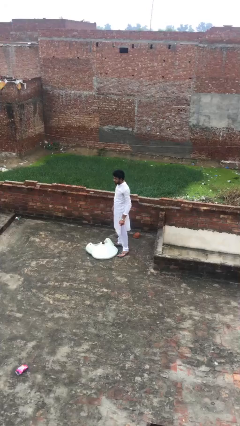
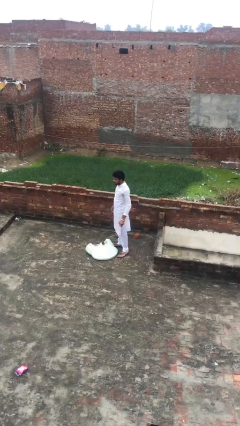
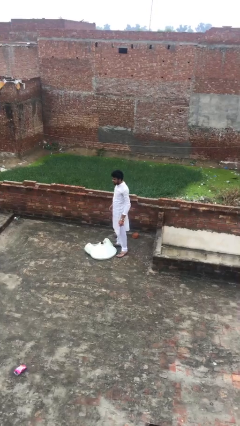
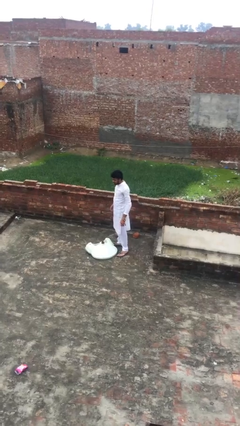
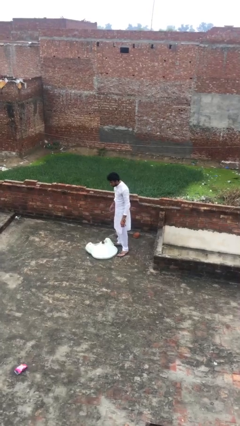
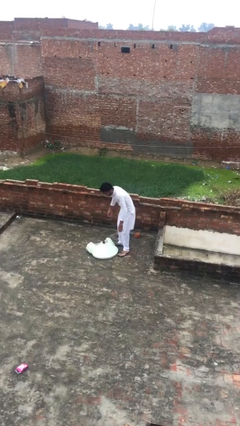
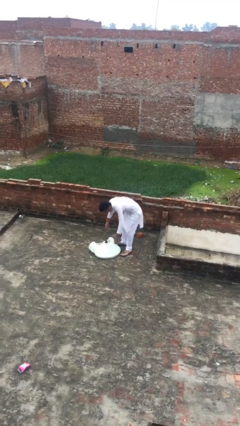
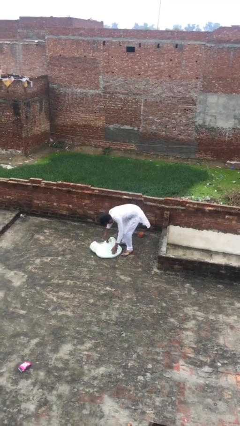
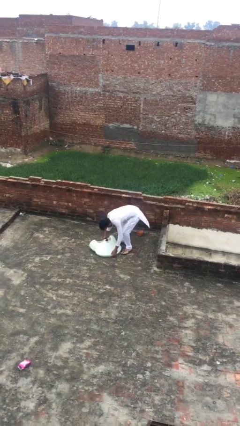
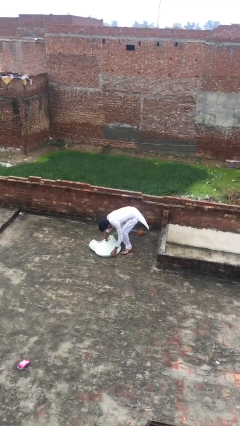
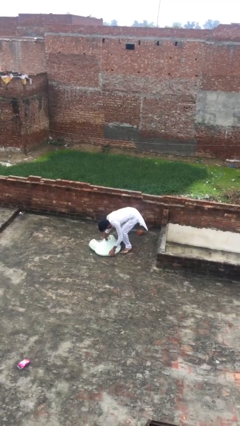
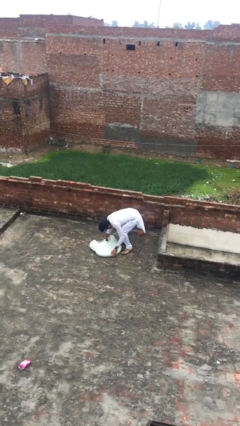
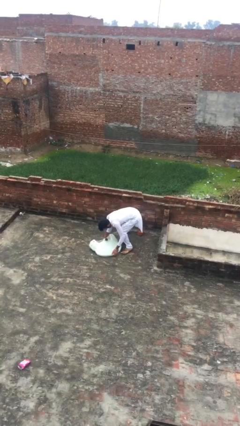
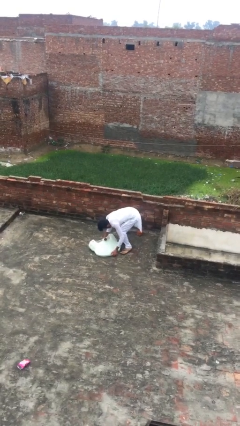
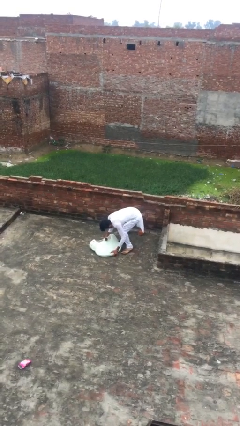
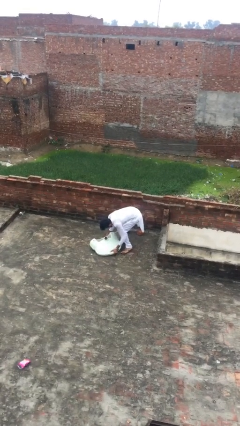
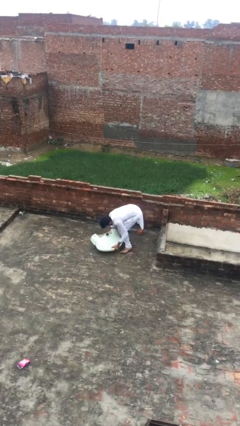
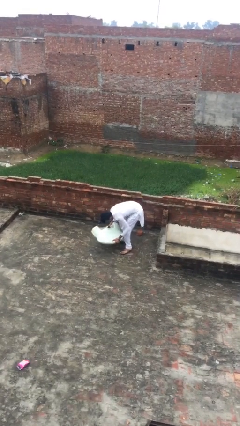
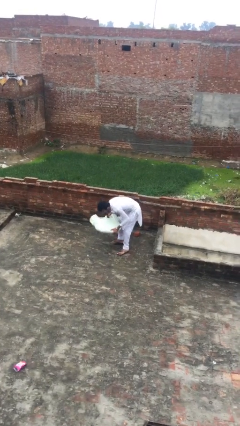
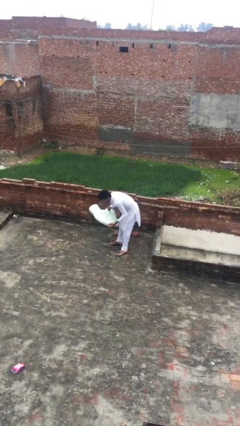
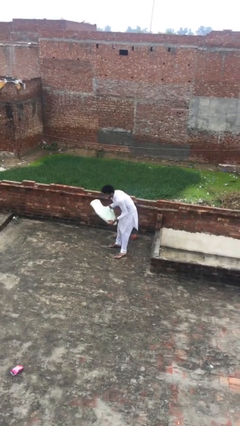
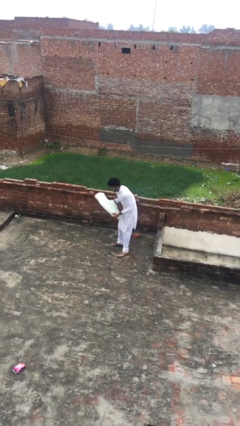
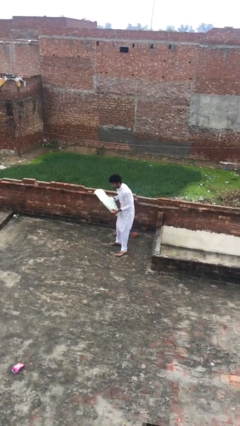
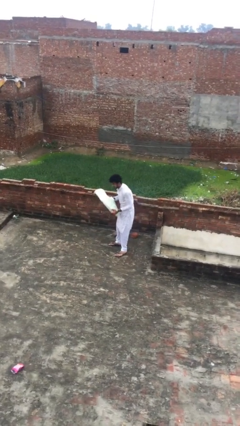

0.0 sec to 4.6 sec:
person picks up object from floor

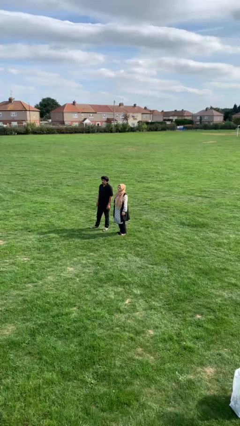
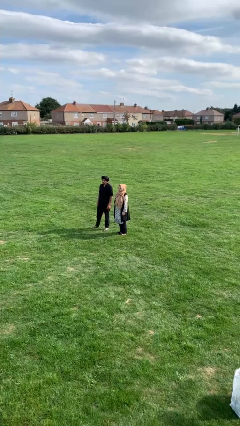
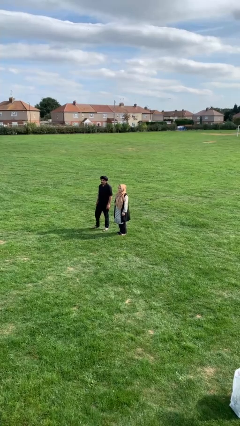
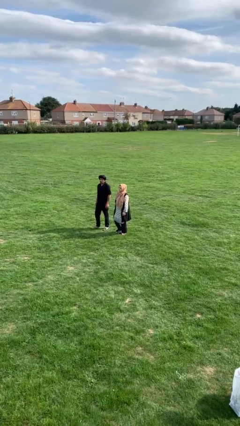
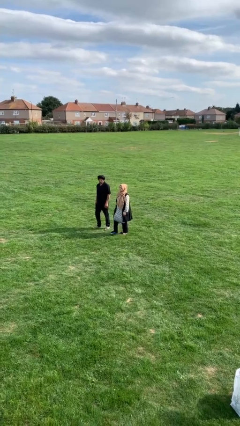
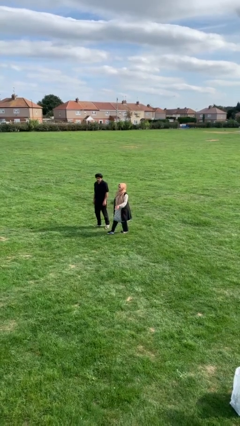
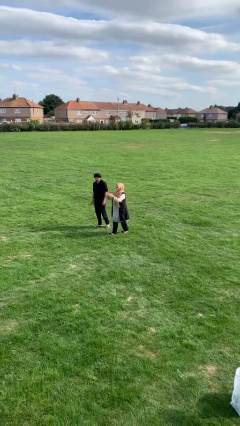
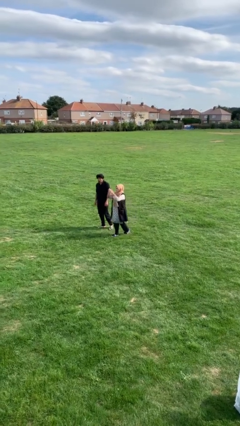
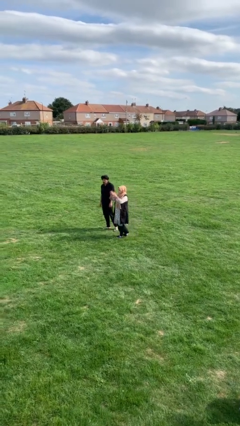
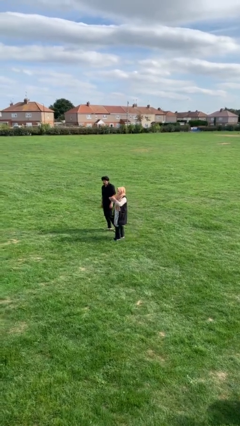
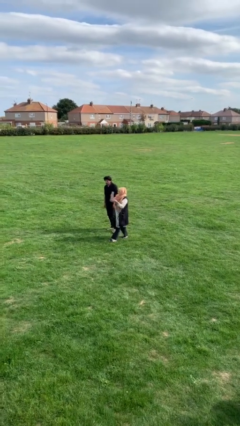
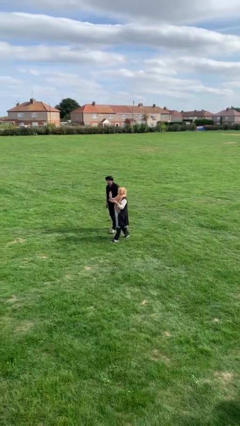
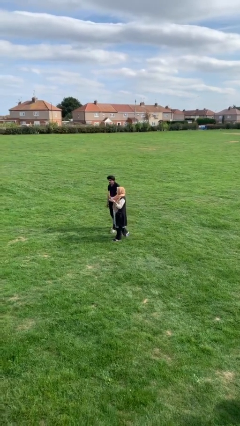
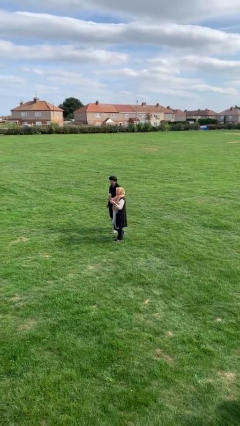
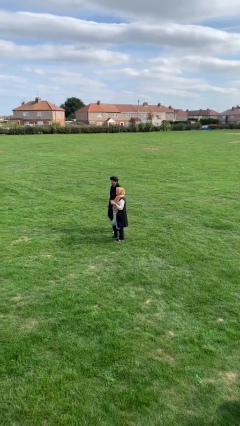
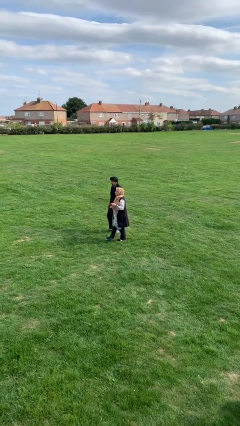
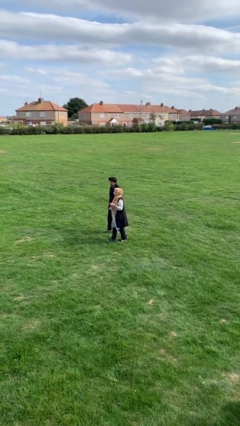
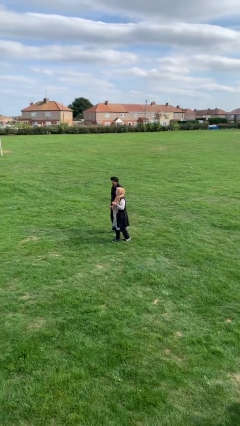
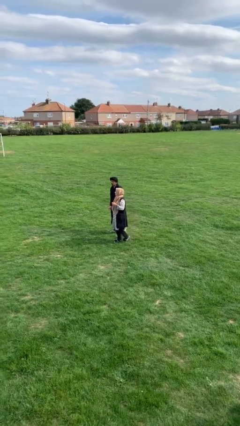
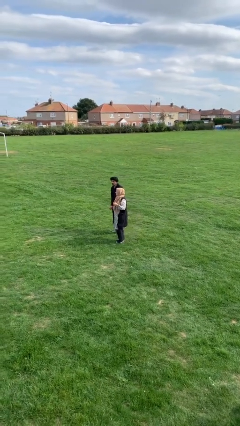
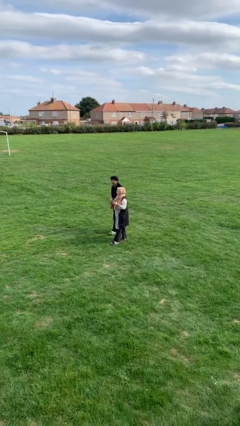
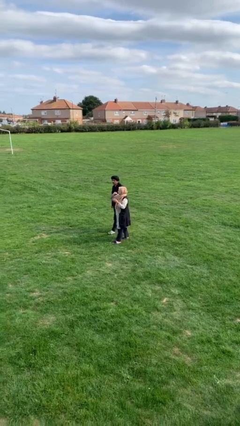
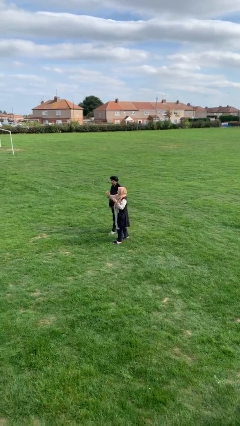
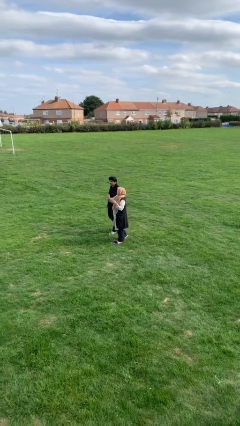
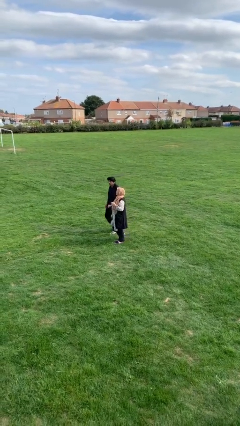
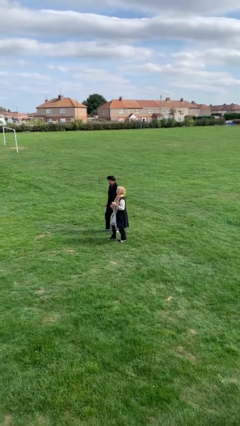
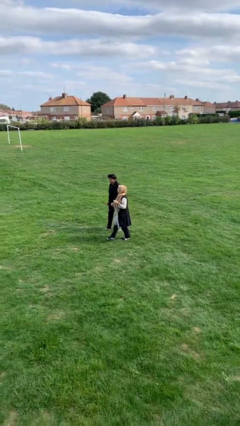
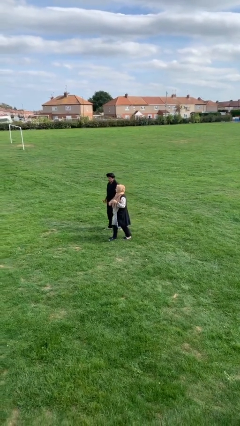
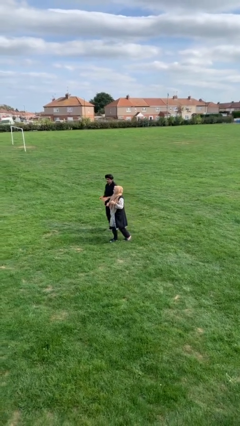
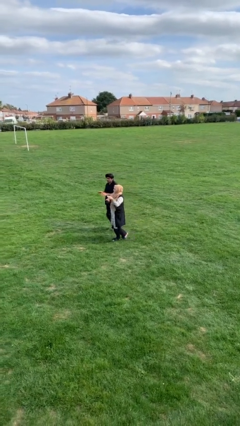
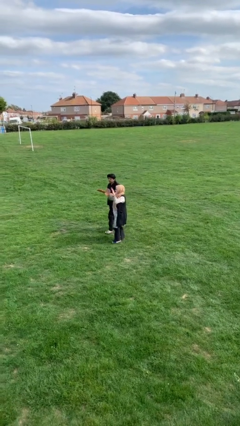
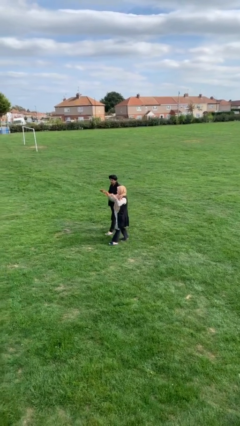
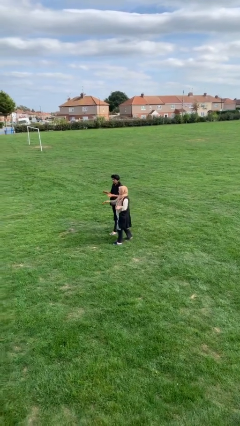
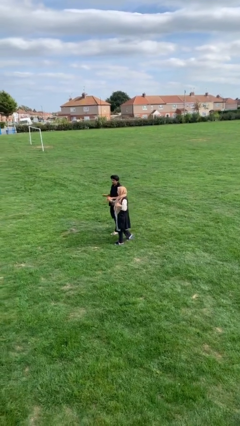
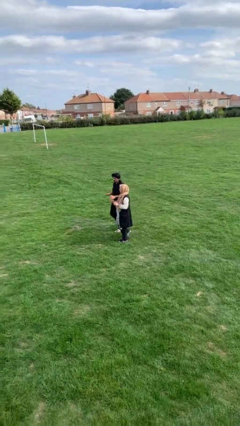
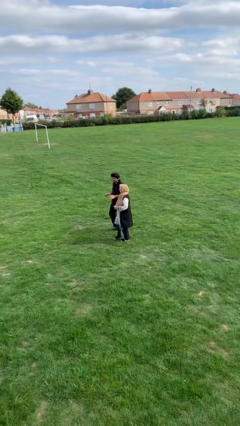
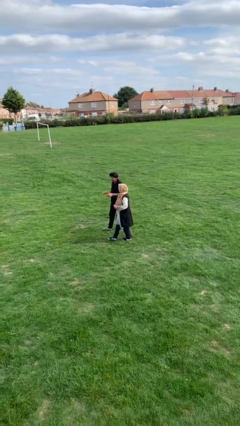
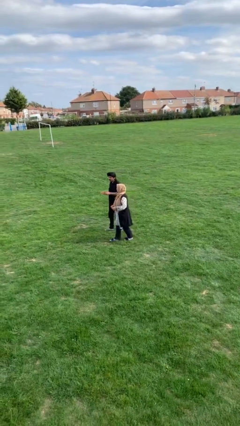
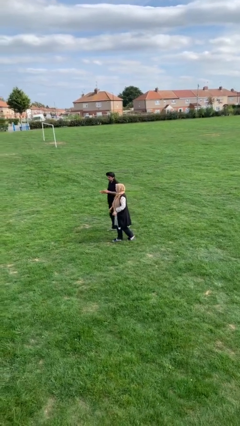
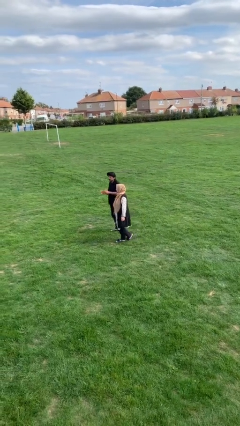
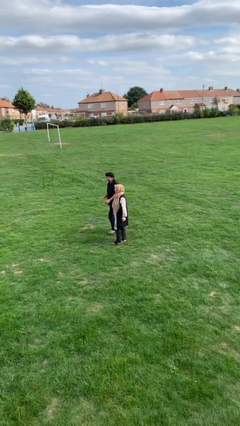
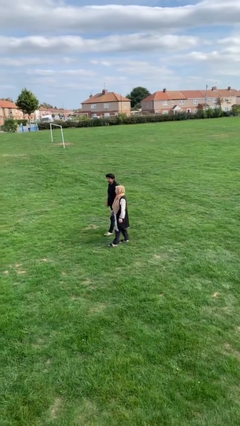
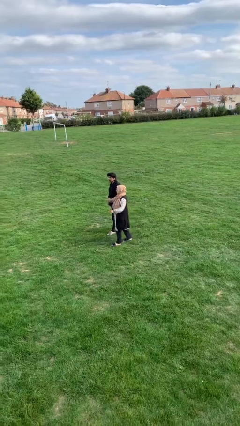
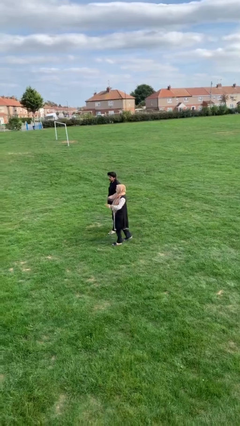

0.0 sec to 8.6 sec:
person talks to person

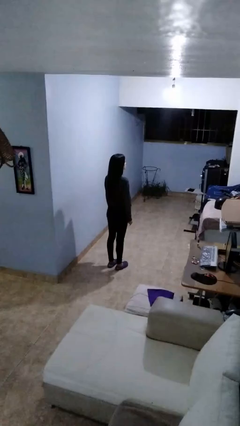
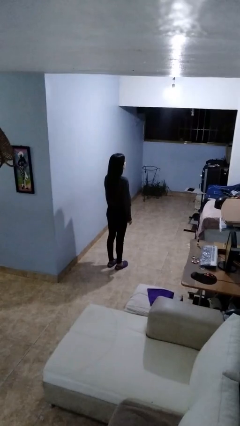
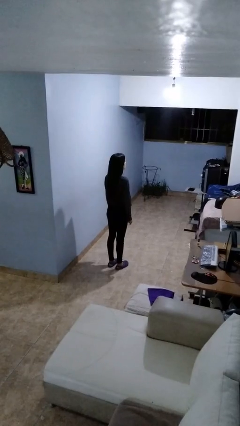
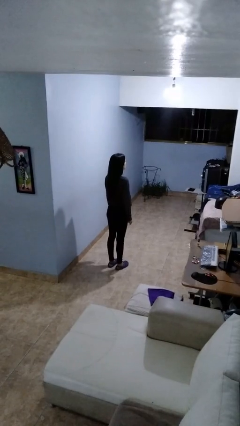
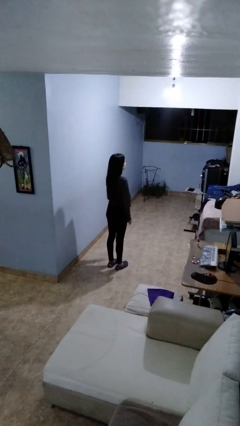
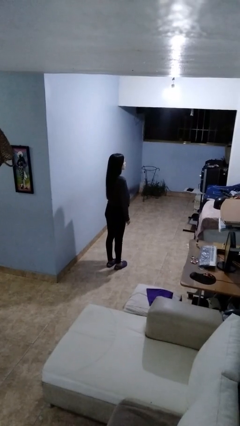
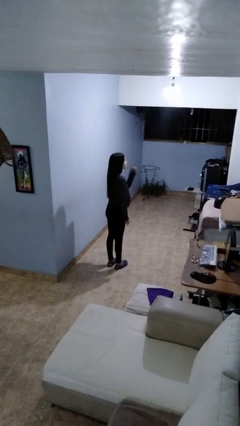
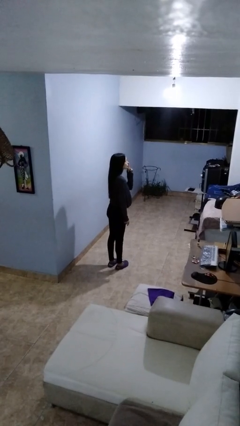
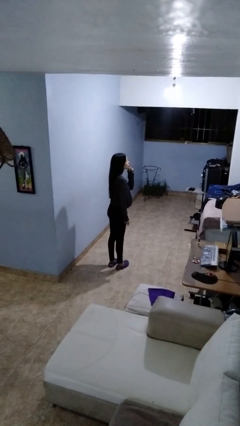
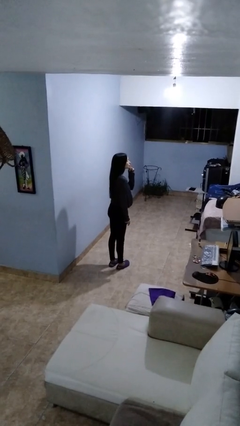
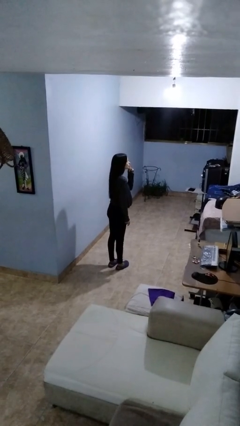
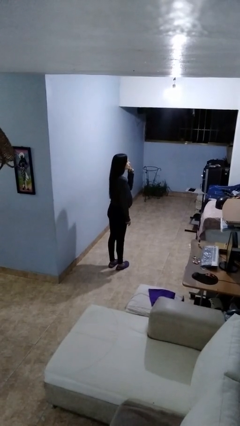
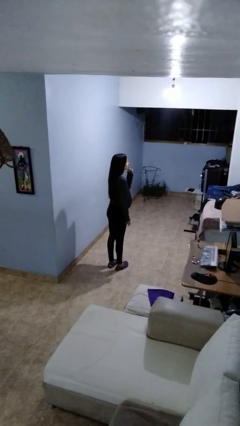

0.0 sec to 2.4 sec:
person gestures be quiet

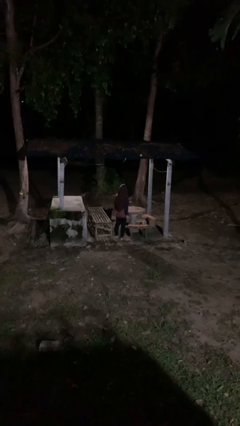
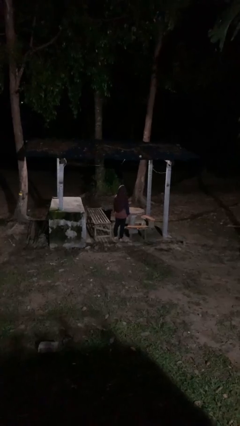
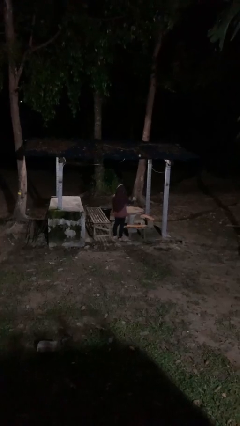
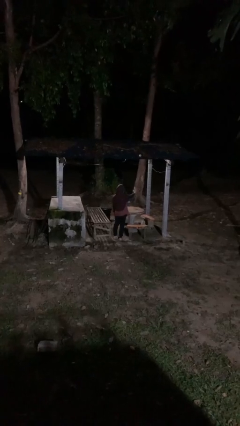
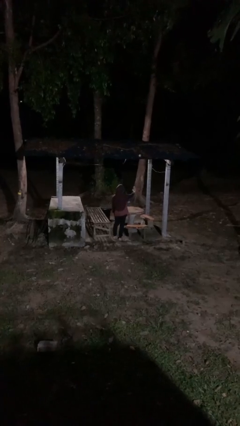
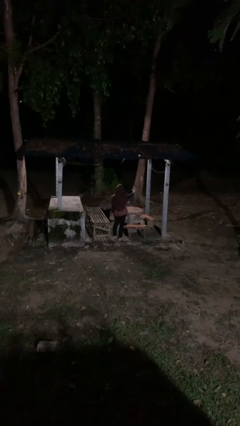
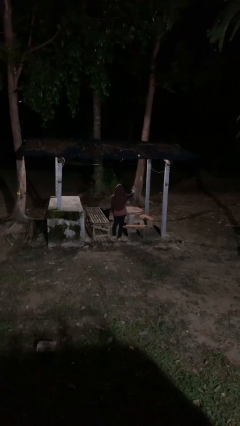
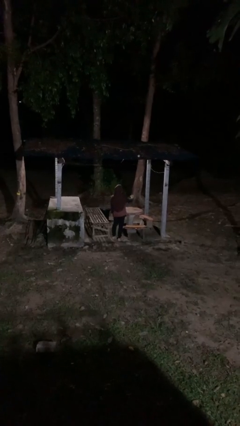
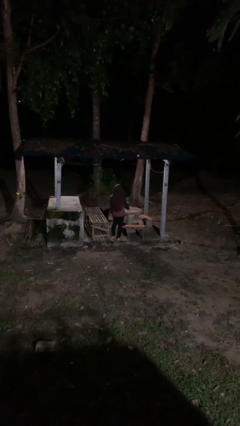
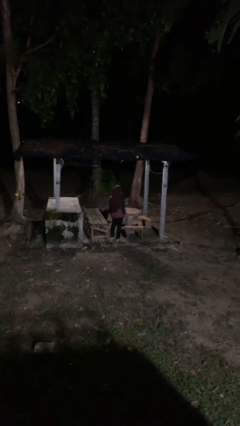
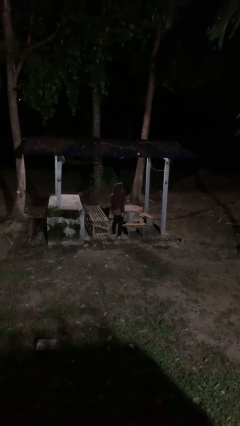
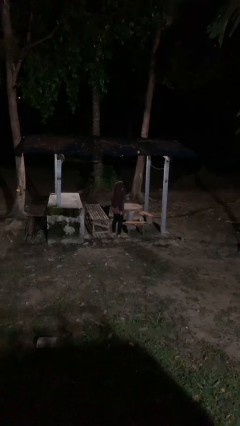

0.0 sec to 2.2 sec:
person gestures stop
